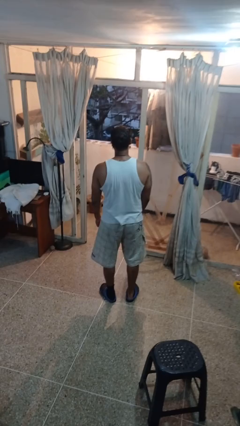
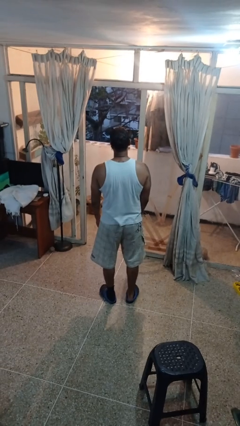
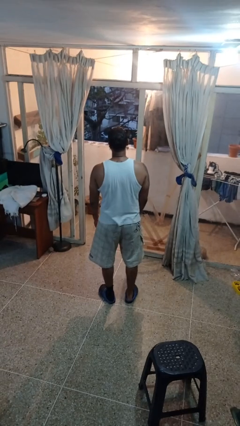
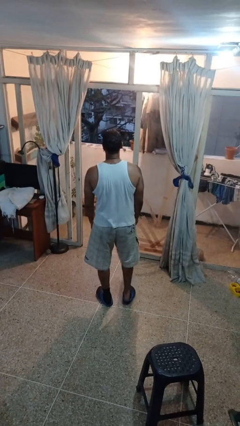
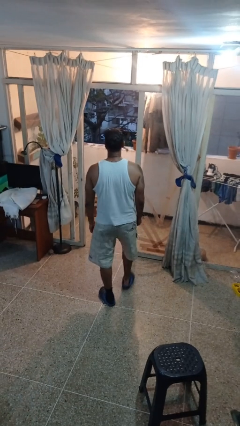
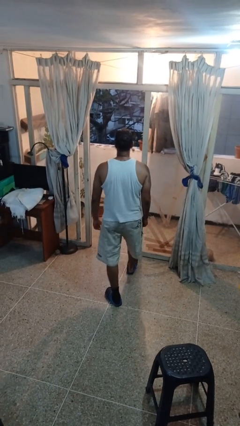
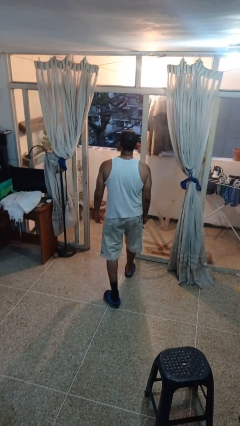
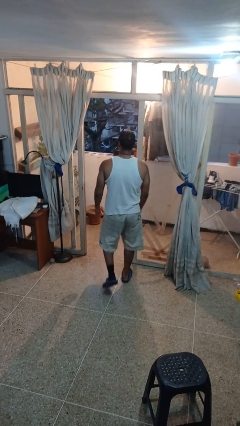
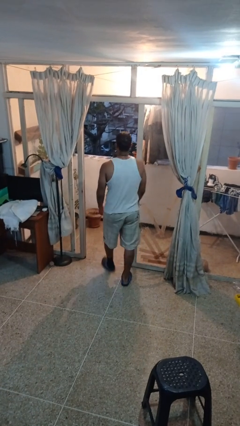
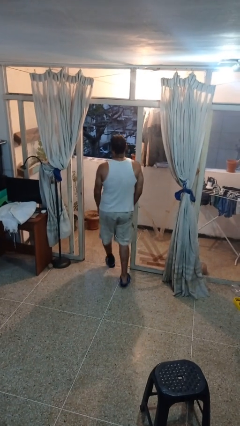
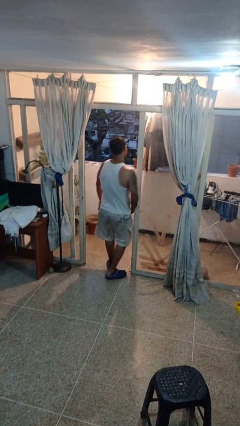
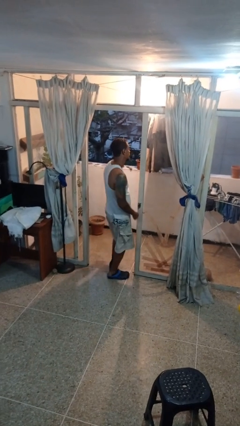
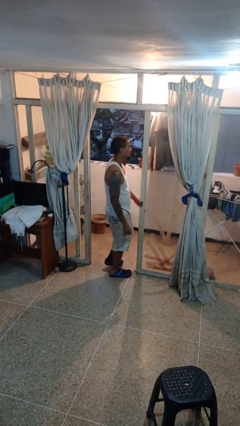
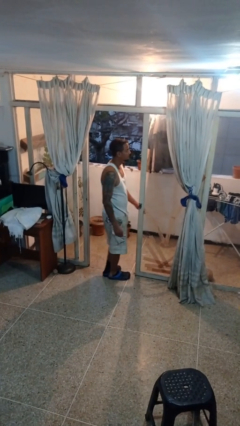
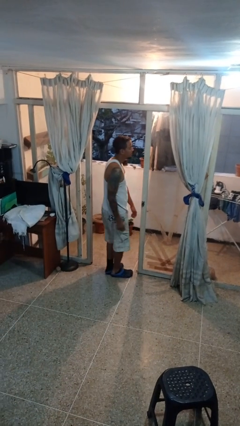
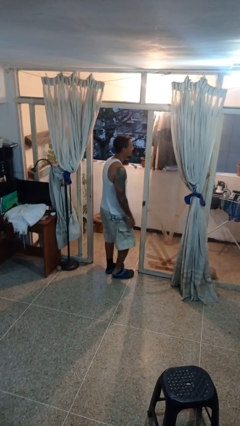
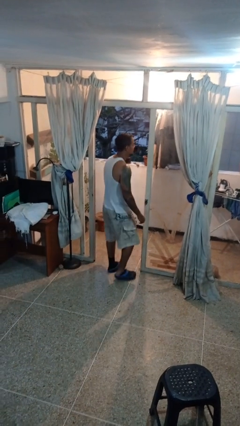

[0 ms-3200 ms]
person bumps into wall

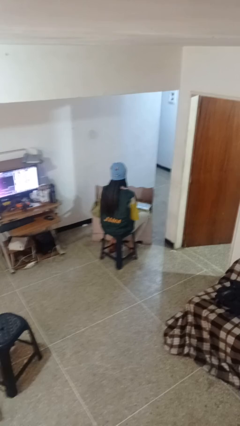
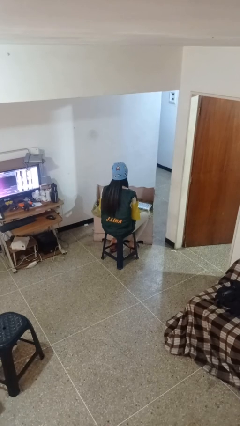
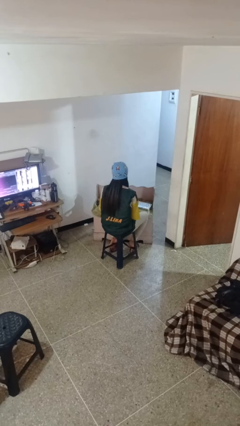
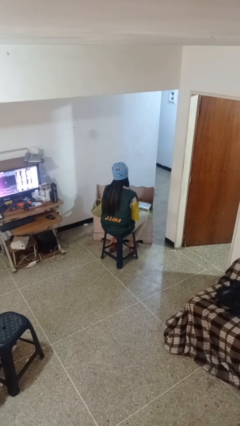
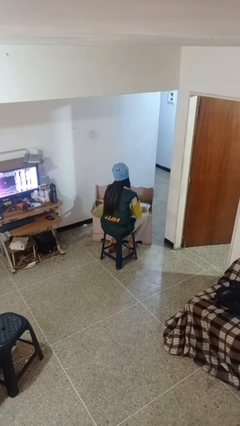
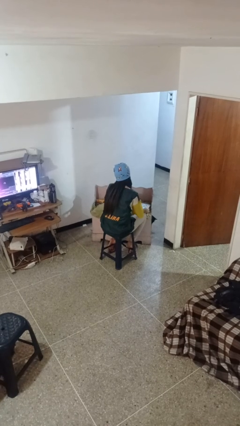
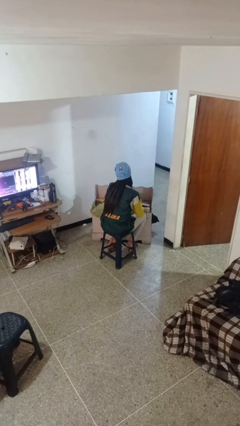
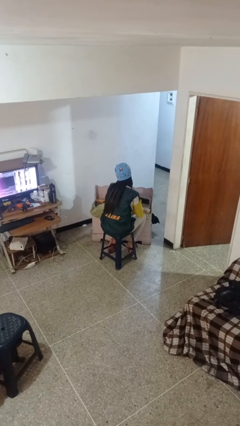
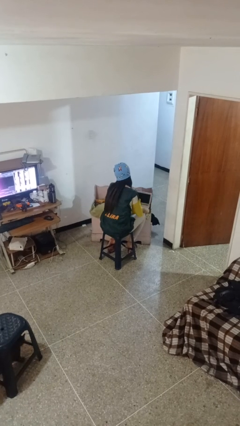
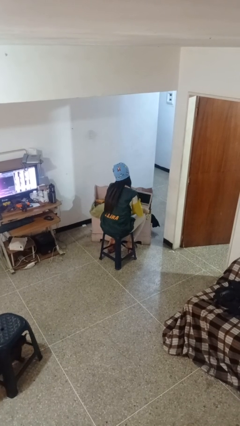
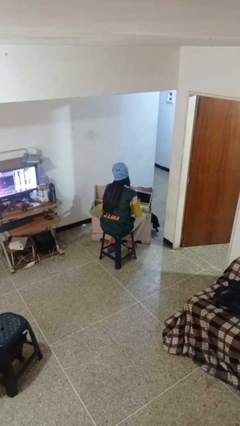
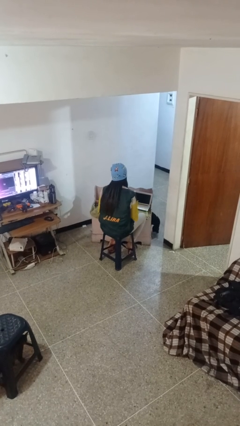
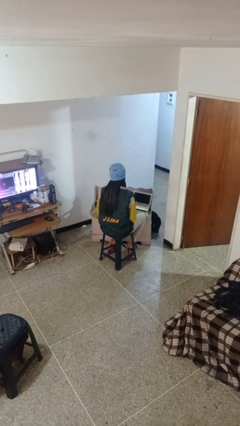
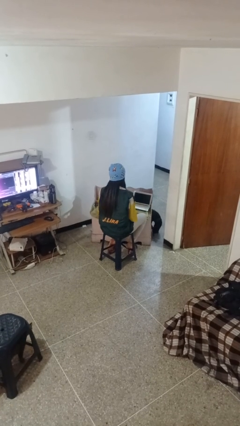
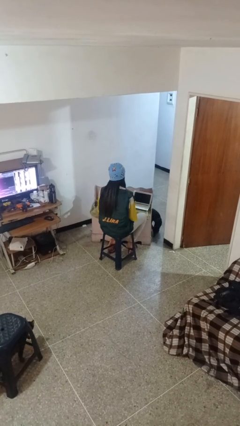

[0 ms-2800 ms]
person opens laptop

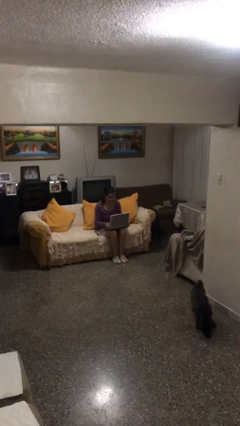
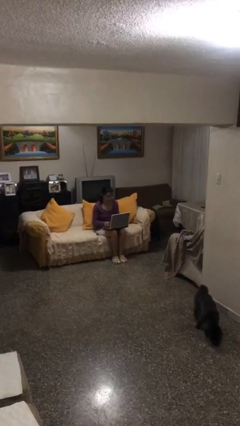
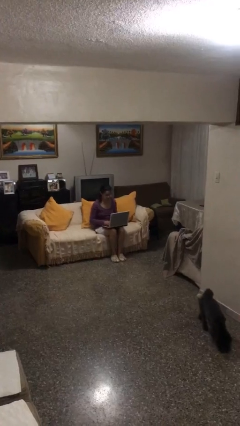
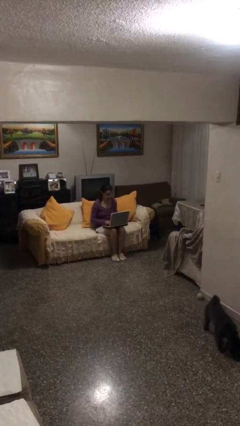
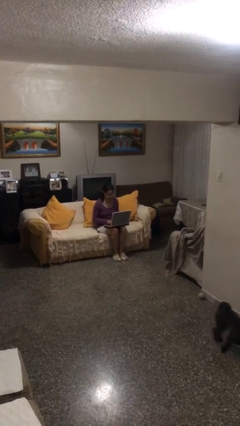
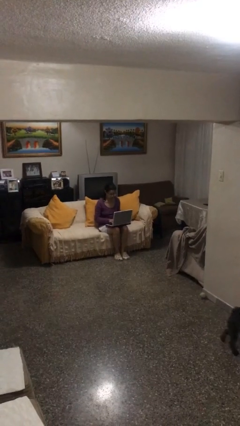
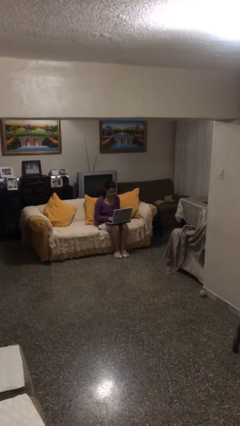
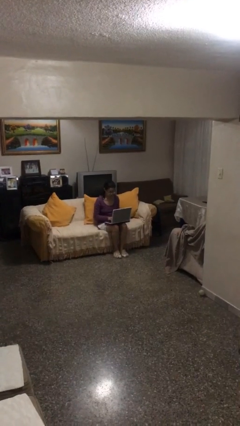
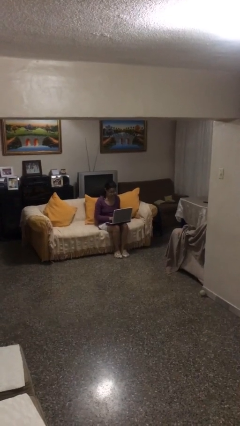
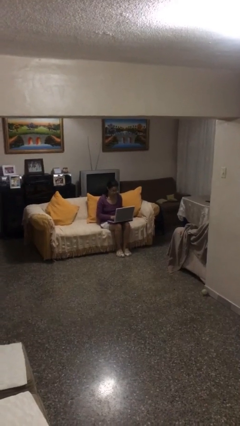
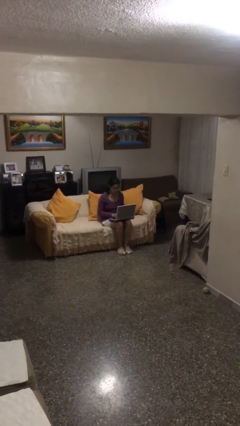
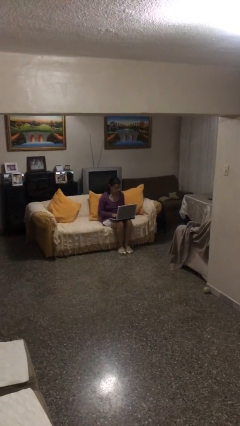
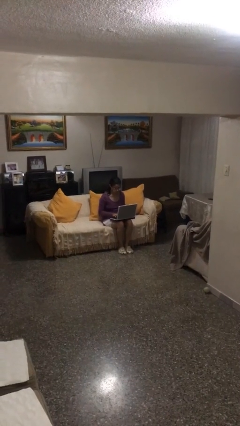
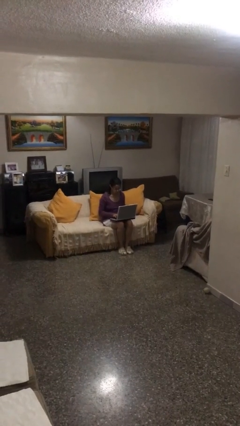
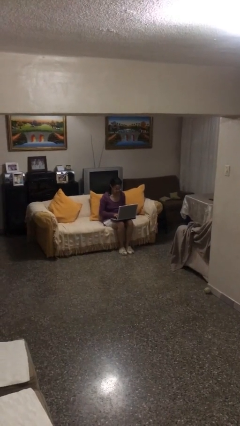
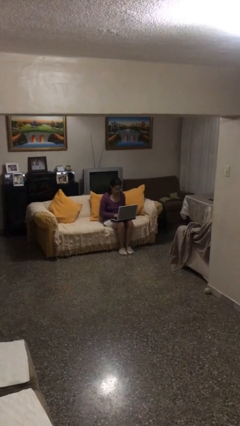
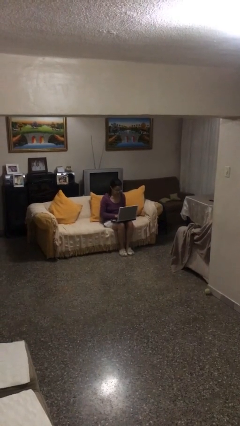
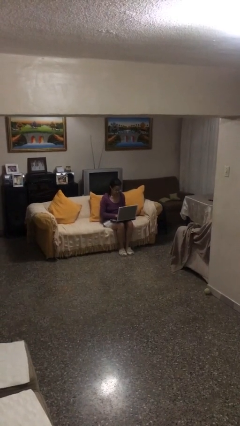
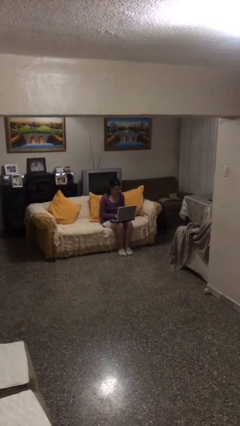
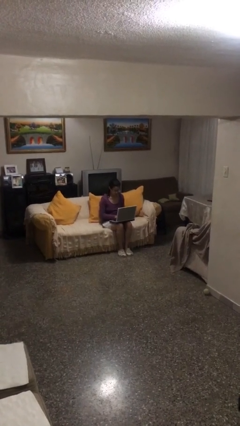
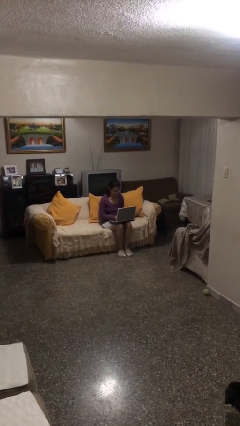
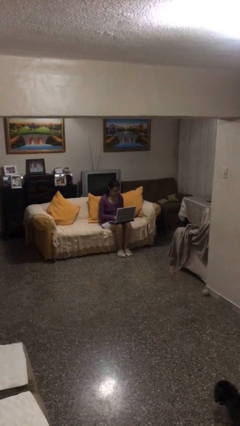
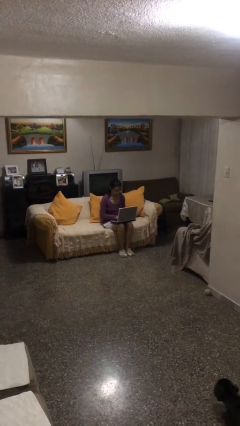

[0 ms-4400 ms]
person interacts with laptop

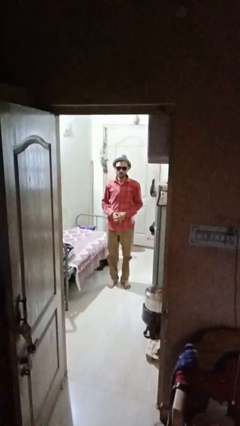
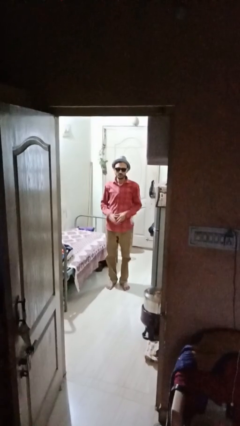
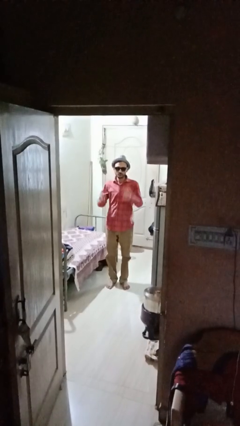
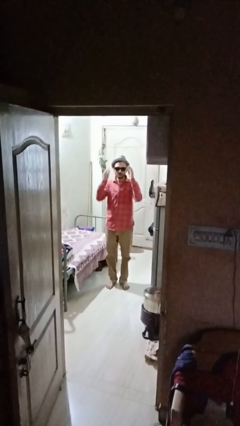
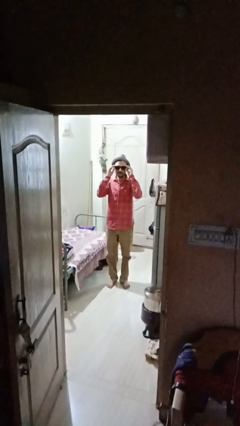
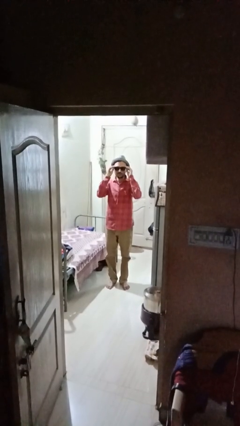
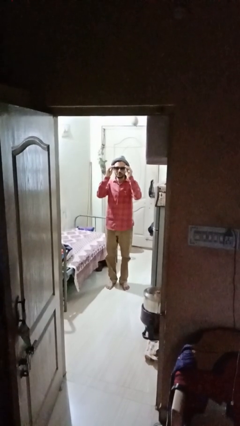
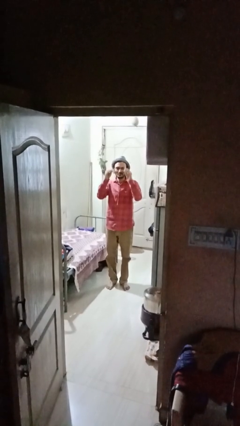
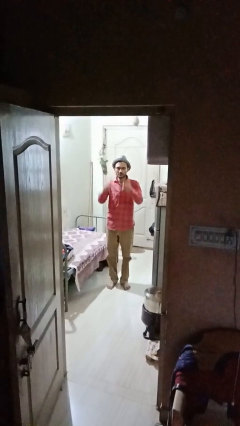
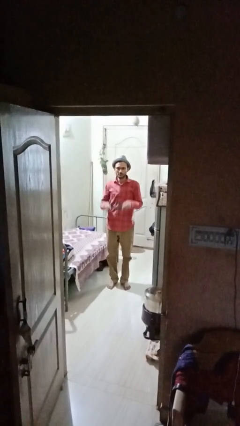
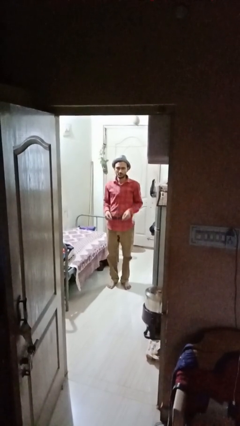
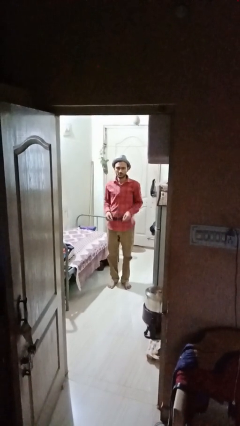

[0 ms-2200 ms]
person takes off sunglasses

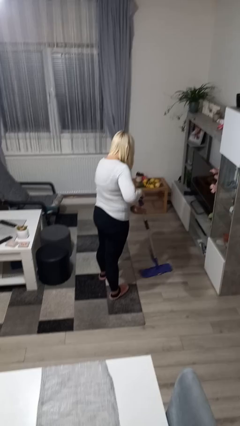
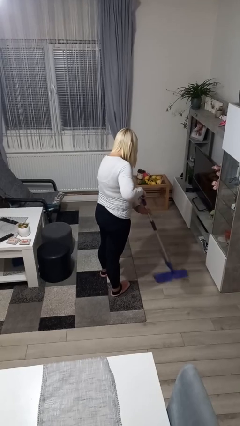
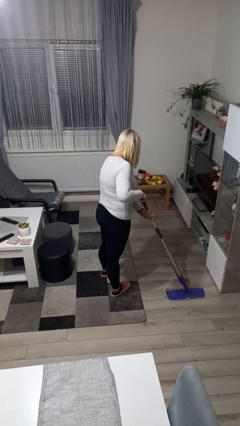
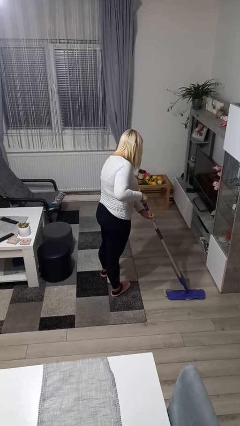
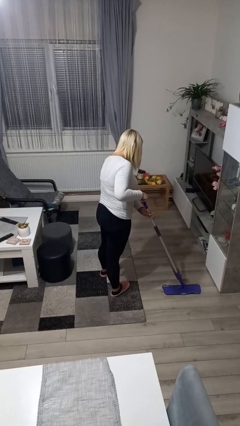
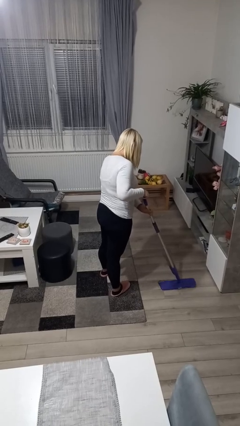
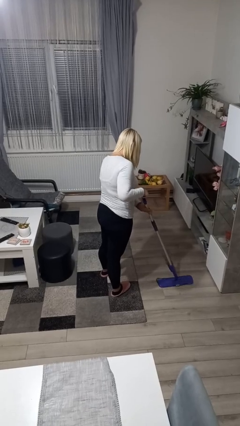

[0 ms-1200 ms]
person mops

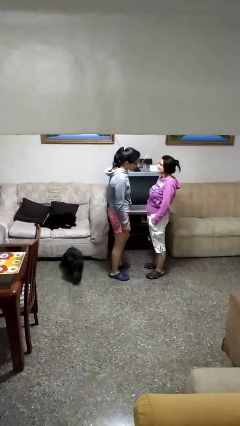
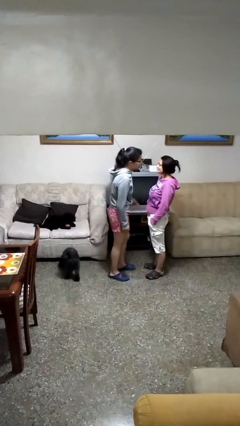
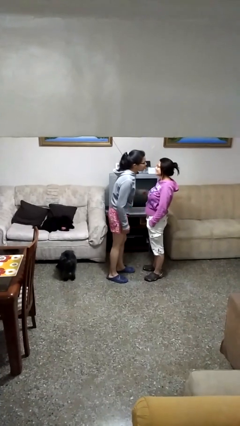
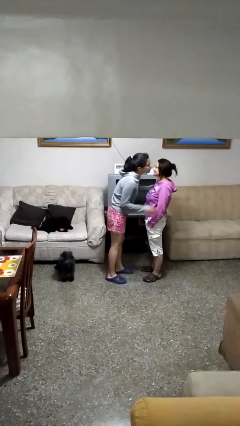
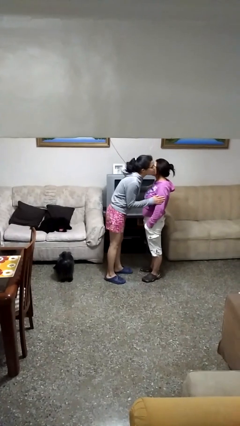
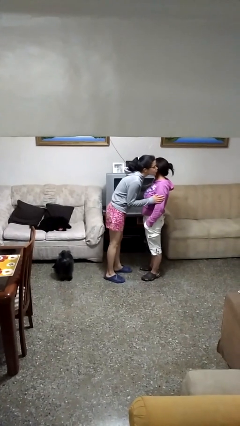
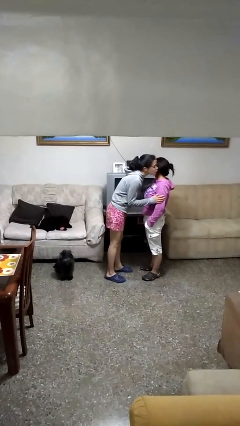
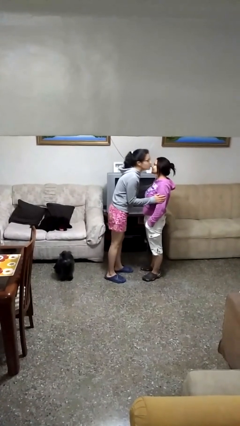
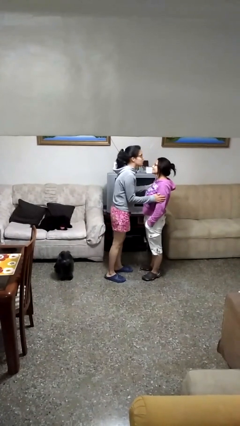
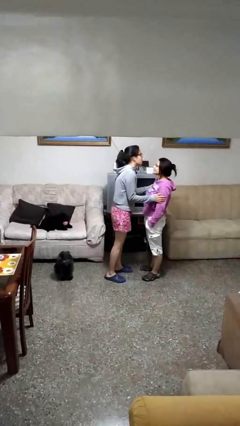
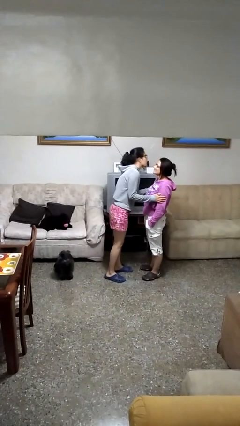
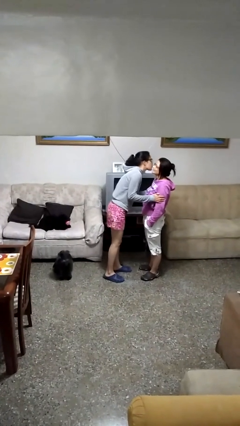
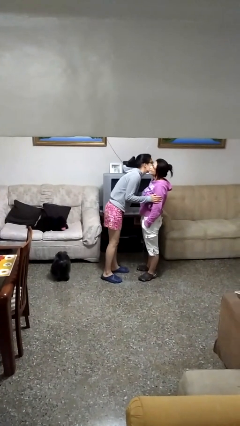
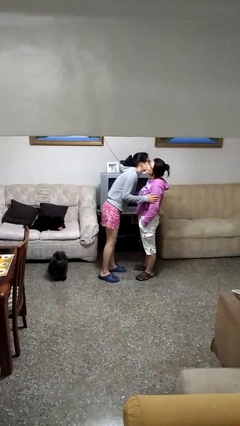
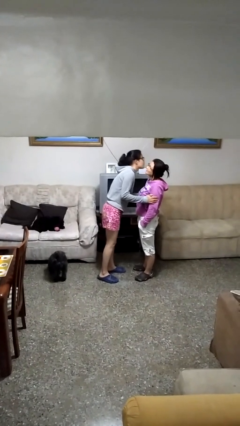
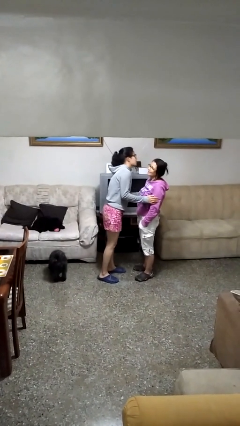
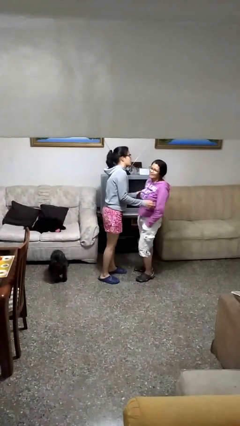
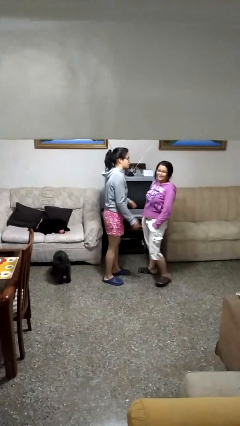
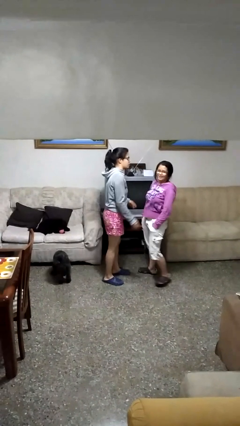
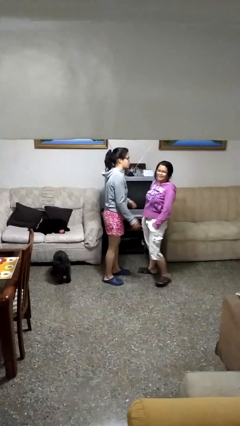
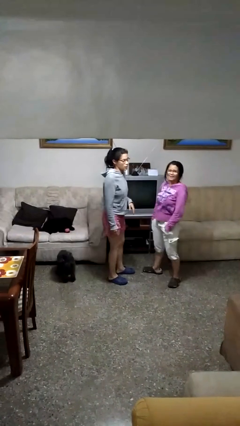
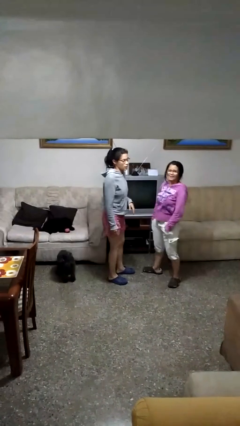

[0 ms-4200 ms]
person kisses cheek of person
